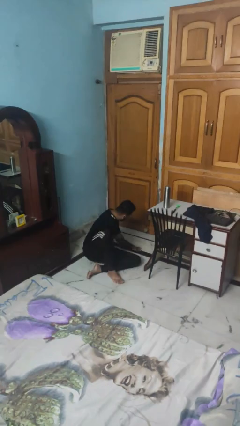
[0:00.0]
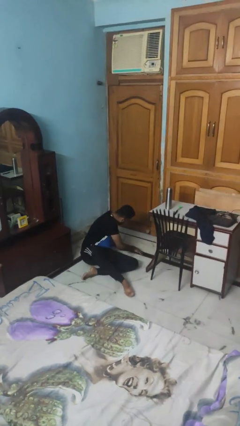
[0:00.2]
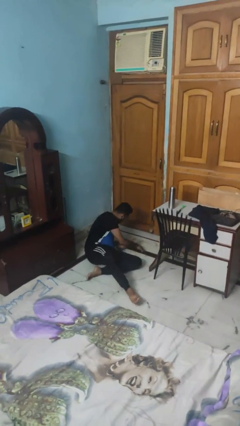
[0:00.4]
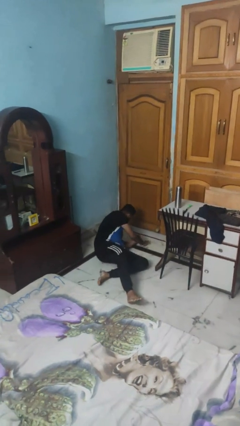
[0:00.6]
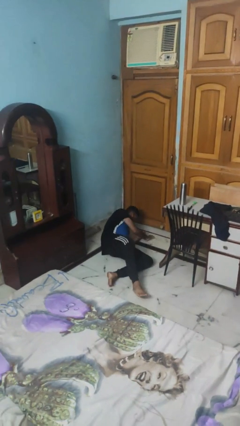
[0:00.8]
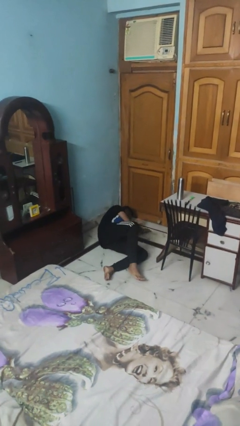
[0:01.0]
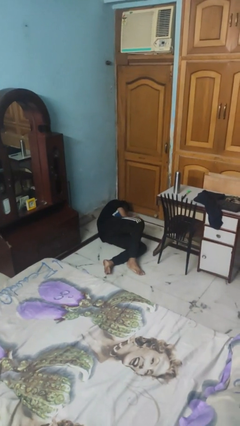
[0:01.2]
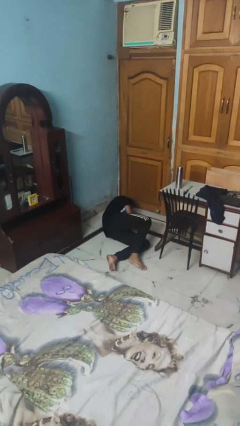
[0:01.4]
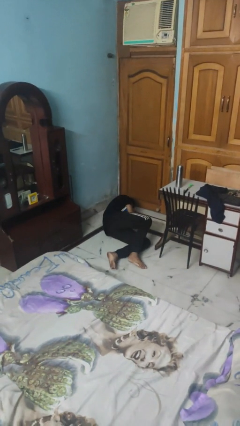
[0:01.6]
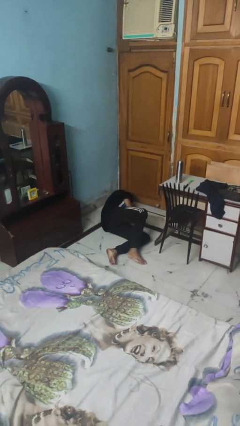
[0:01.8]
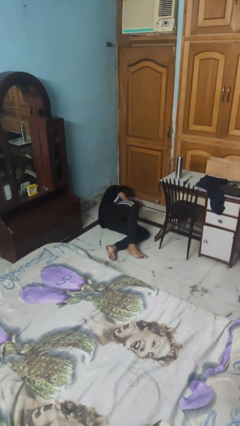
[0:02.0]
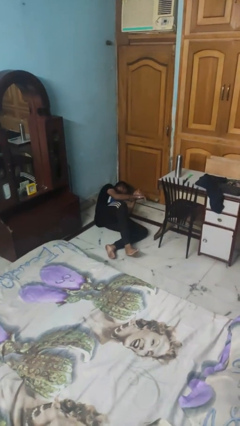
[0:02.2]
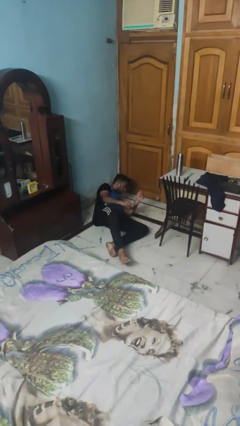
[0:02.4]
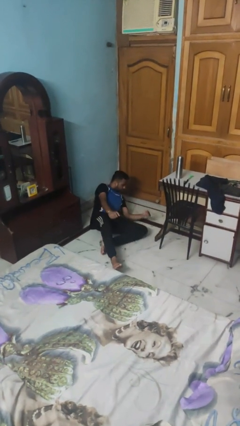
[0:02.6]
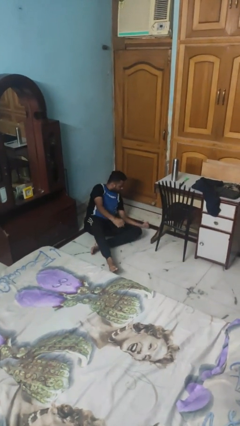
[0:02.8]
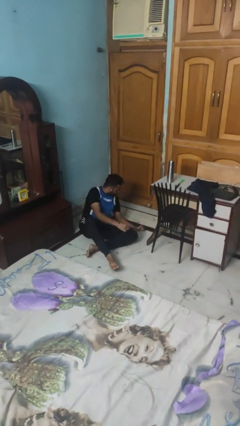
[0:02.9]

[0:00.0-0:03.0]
person lies down on floor

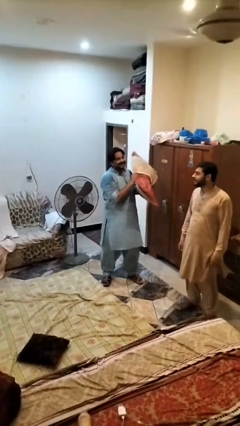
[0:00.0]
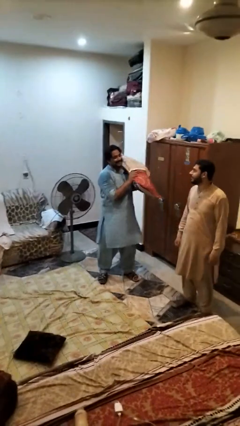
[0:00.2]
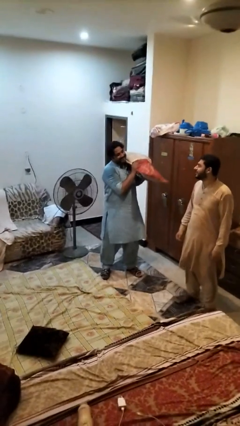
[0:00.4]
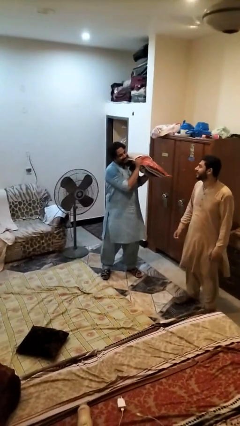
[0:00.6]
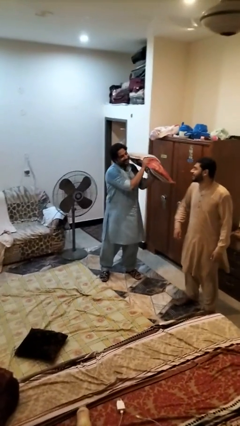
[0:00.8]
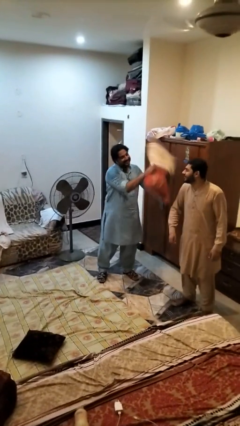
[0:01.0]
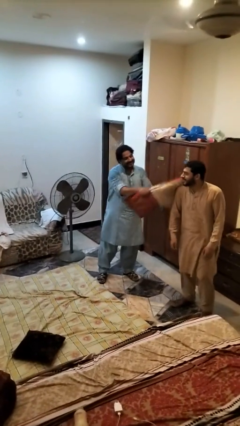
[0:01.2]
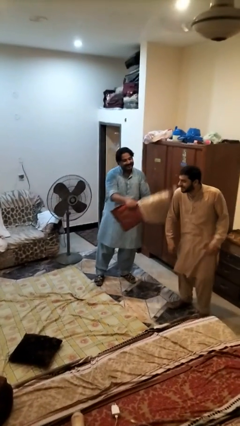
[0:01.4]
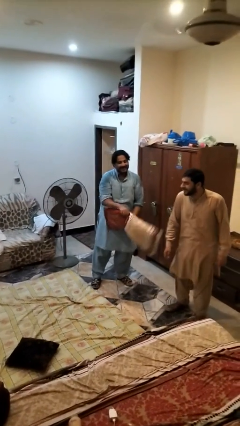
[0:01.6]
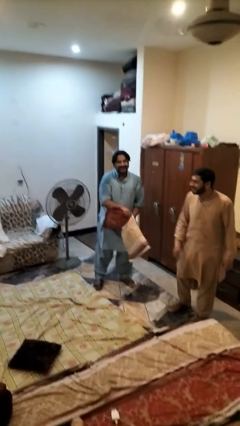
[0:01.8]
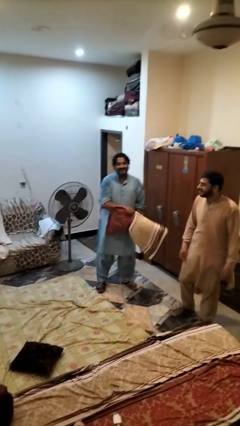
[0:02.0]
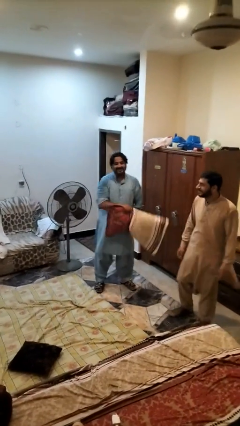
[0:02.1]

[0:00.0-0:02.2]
person hits person with pillow

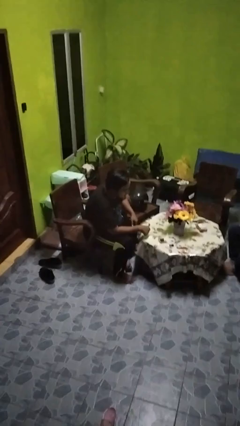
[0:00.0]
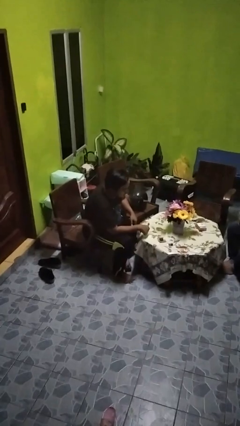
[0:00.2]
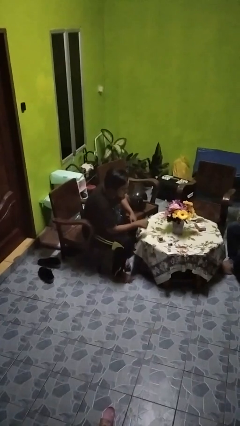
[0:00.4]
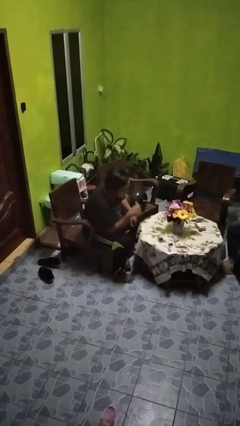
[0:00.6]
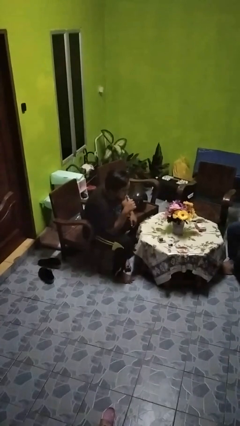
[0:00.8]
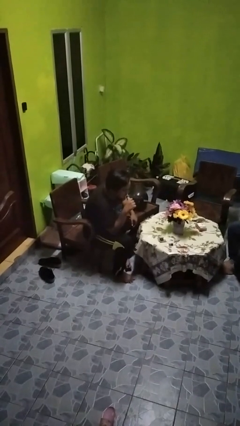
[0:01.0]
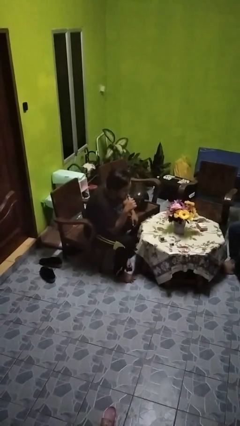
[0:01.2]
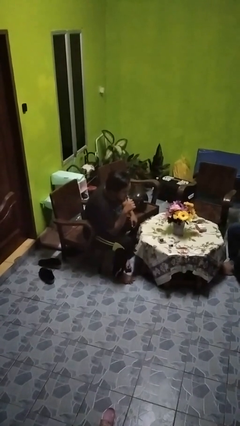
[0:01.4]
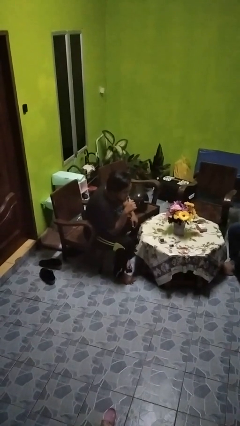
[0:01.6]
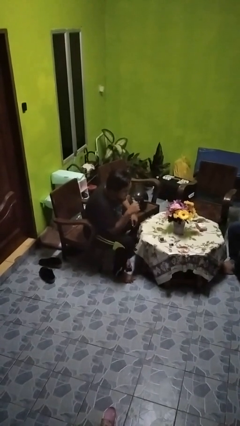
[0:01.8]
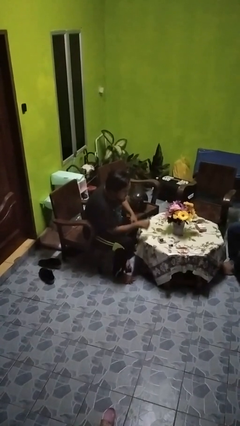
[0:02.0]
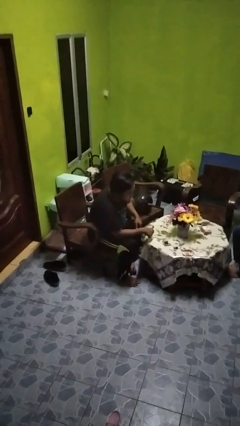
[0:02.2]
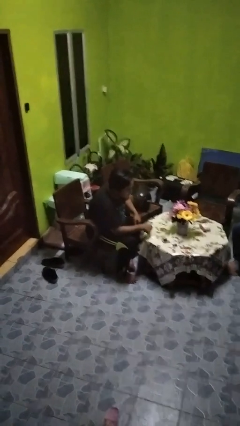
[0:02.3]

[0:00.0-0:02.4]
person vapes

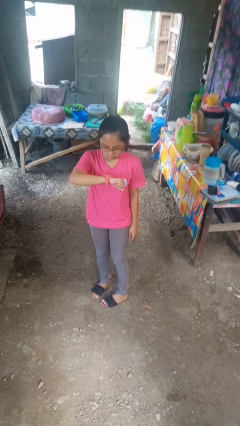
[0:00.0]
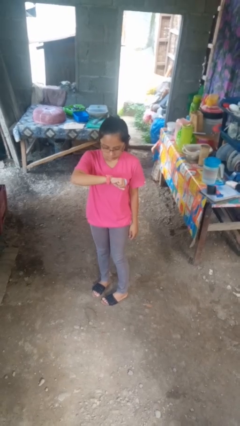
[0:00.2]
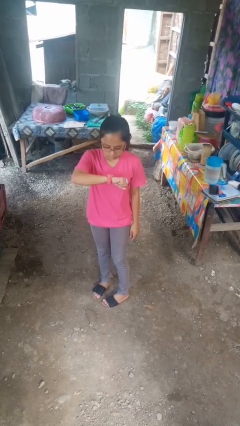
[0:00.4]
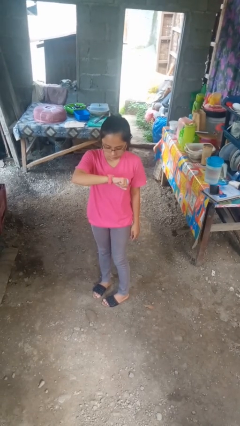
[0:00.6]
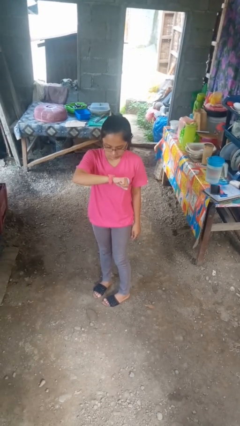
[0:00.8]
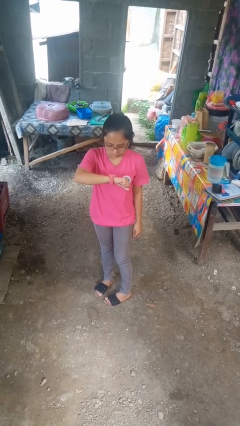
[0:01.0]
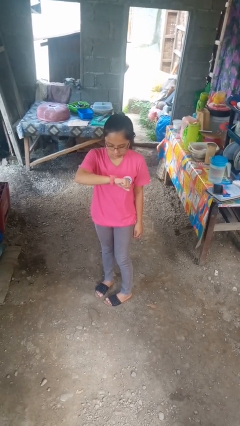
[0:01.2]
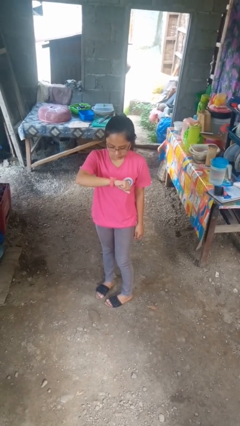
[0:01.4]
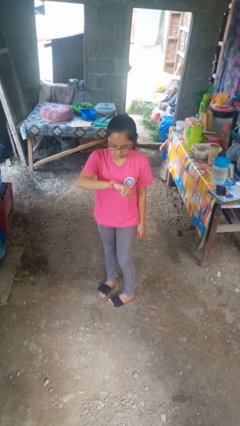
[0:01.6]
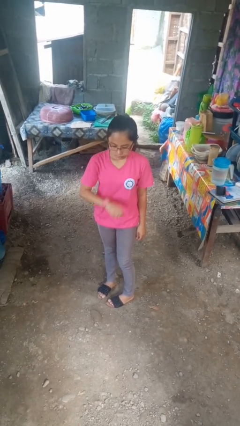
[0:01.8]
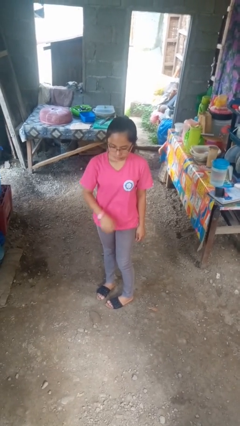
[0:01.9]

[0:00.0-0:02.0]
person looks at wristwatch

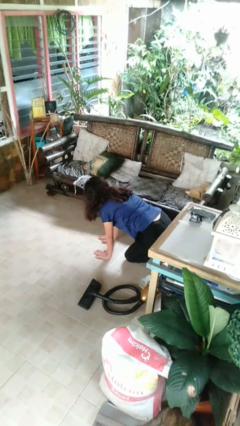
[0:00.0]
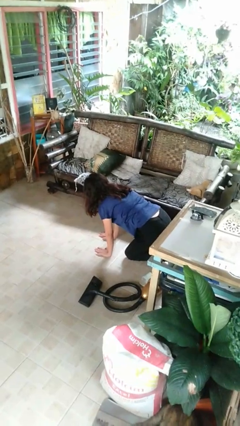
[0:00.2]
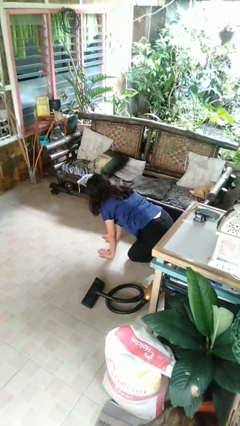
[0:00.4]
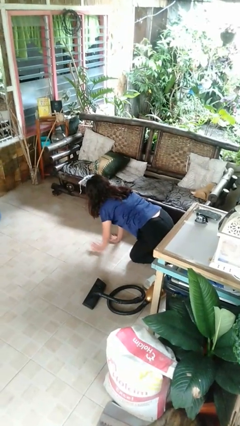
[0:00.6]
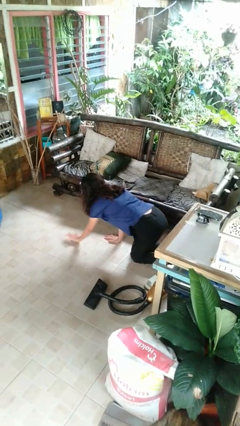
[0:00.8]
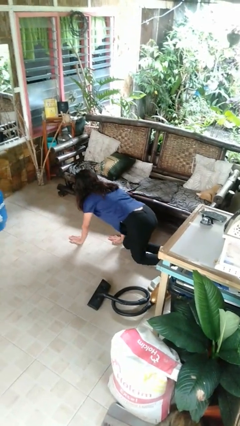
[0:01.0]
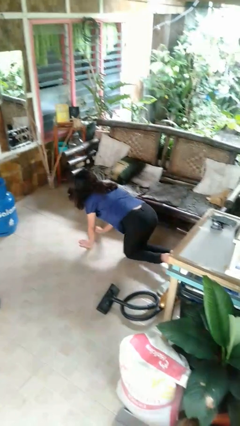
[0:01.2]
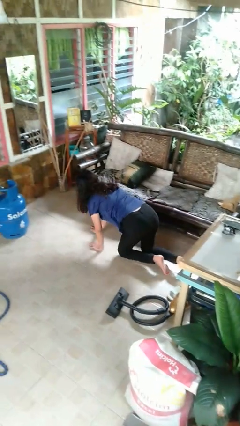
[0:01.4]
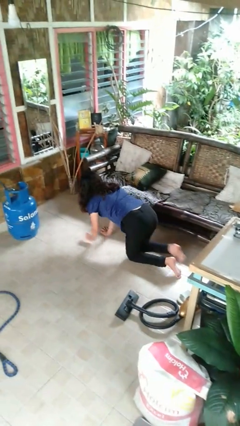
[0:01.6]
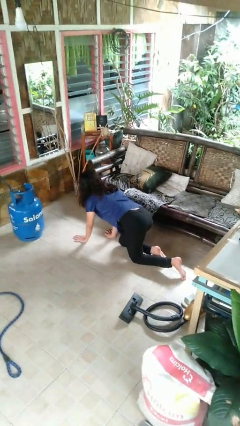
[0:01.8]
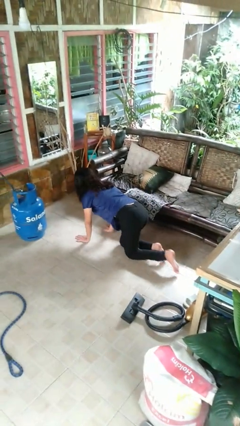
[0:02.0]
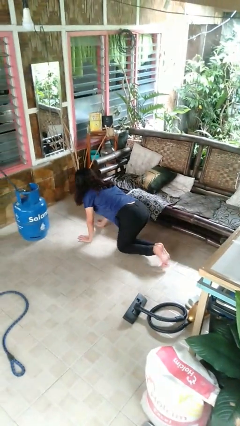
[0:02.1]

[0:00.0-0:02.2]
person crawls

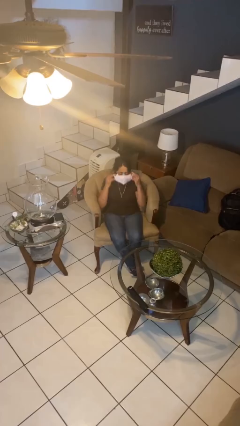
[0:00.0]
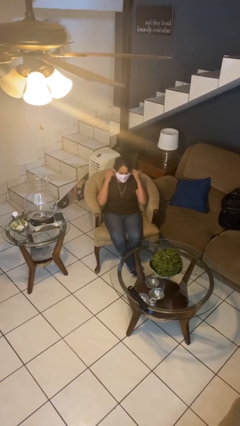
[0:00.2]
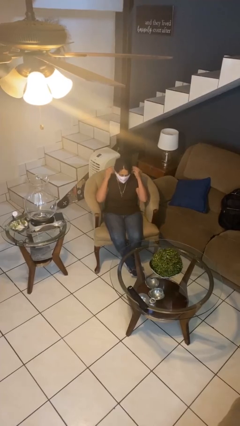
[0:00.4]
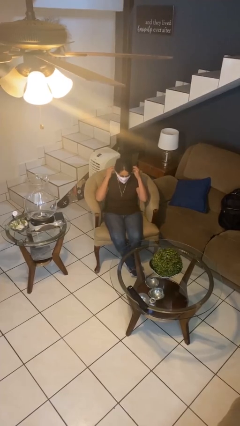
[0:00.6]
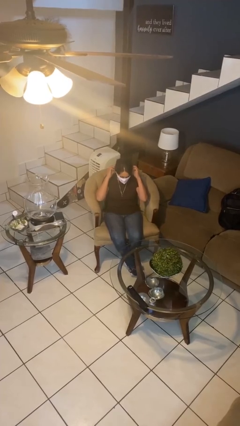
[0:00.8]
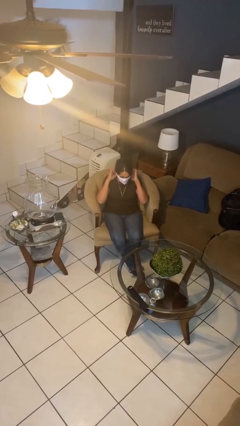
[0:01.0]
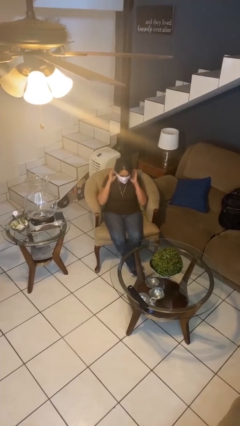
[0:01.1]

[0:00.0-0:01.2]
person puts on facemask

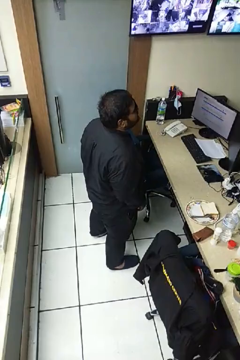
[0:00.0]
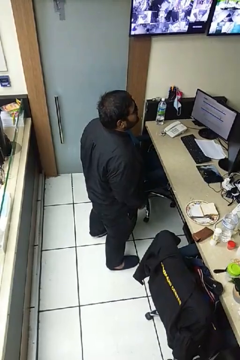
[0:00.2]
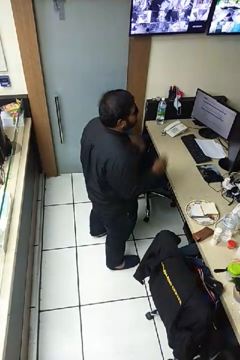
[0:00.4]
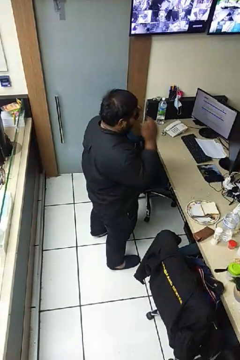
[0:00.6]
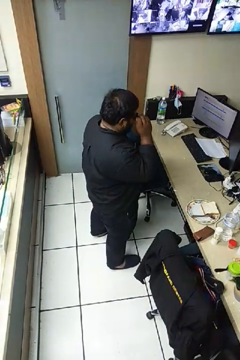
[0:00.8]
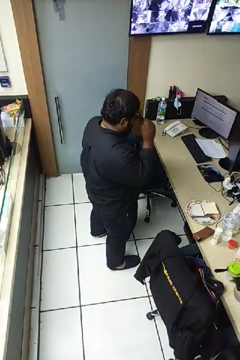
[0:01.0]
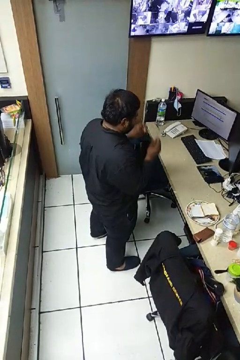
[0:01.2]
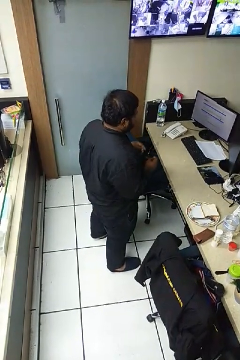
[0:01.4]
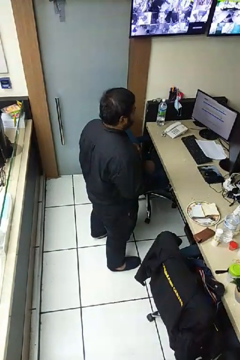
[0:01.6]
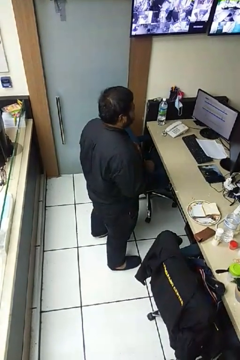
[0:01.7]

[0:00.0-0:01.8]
person takes off sunglasses

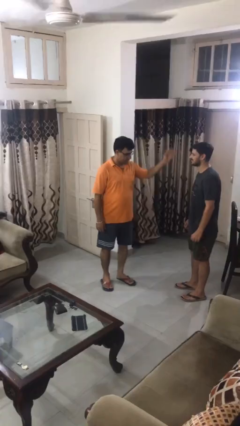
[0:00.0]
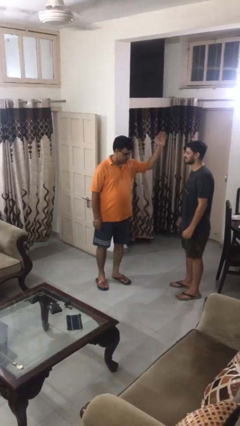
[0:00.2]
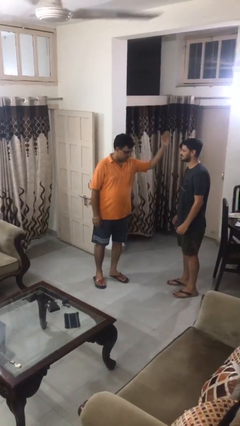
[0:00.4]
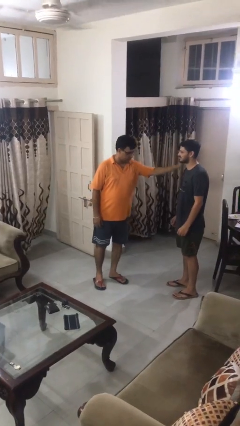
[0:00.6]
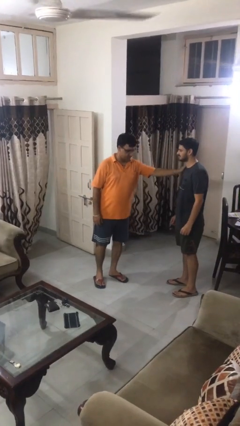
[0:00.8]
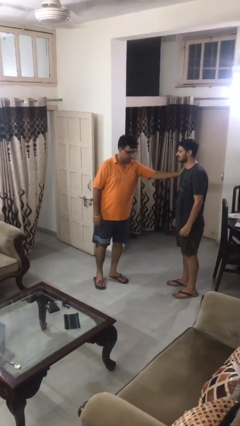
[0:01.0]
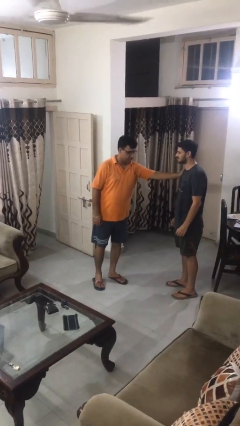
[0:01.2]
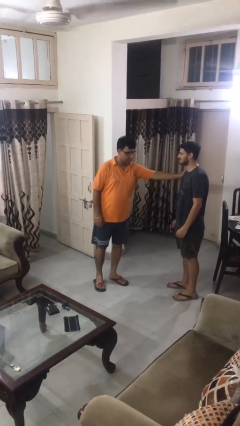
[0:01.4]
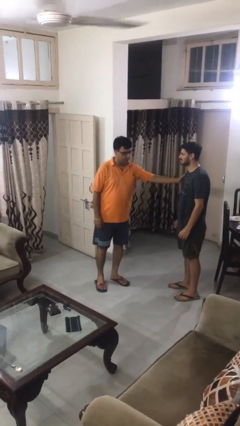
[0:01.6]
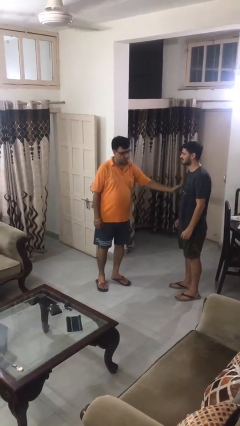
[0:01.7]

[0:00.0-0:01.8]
person pounds shoulders of person

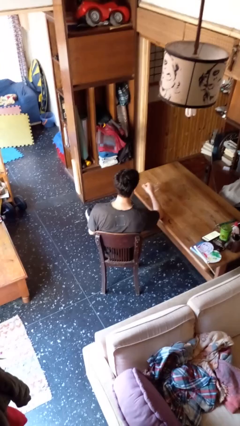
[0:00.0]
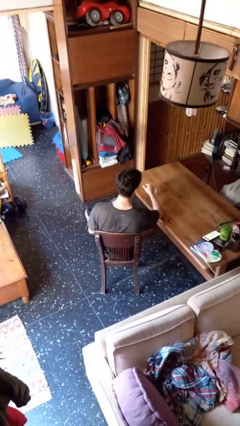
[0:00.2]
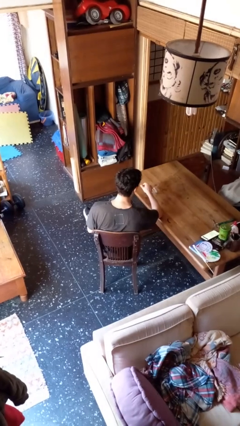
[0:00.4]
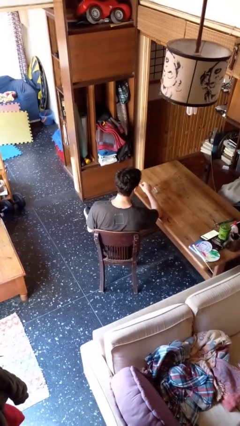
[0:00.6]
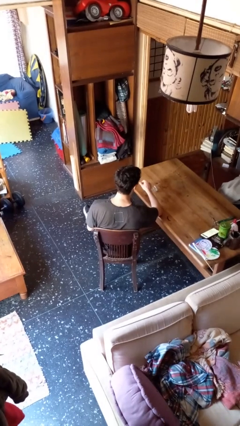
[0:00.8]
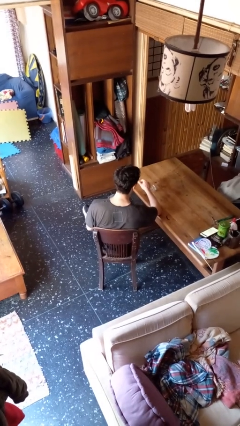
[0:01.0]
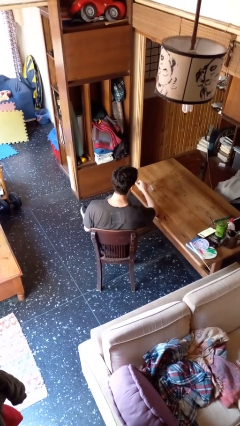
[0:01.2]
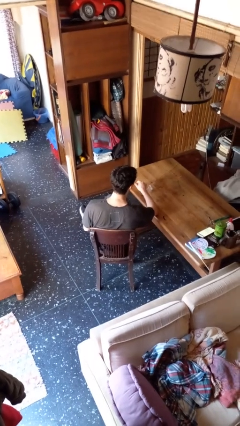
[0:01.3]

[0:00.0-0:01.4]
person spills on table
